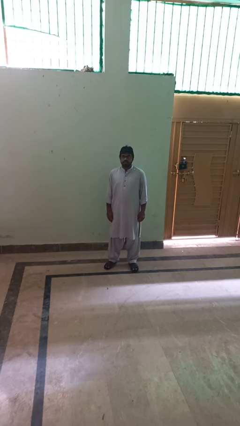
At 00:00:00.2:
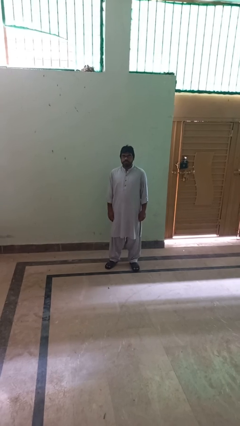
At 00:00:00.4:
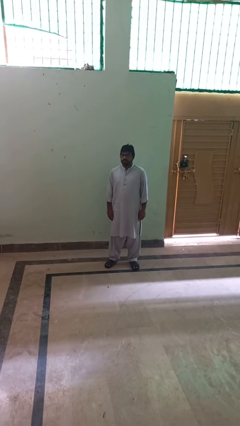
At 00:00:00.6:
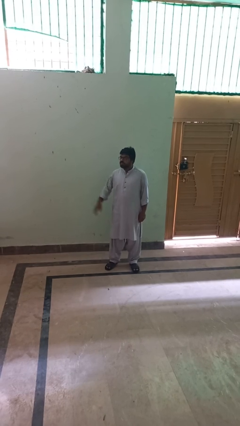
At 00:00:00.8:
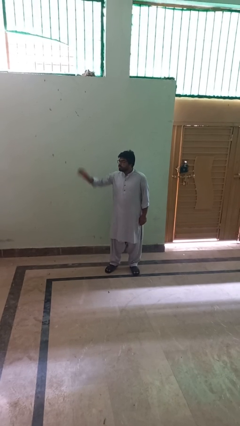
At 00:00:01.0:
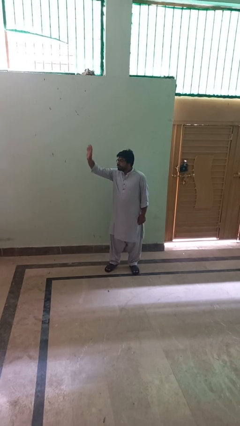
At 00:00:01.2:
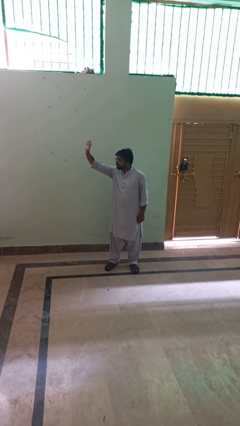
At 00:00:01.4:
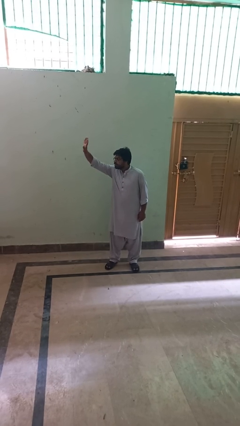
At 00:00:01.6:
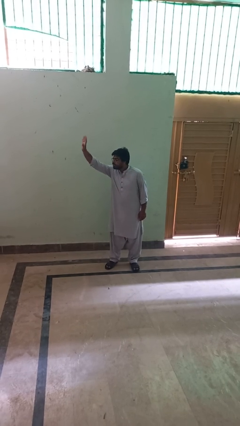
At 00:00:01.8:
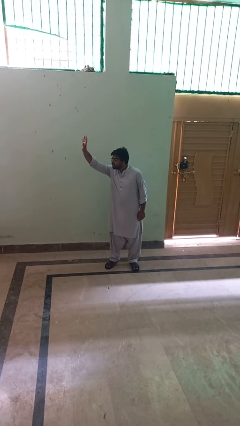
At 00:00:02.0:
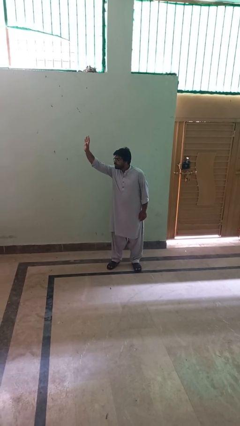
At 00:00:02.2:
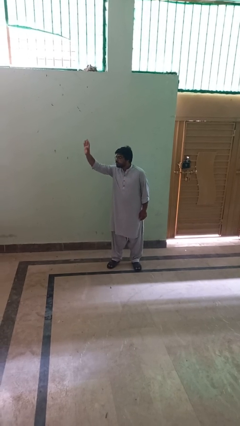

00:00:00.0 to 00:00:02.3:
person waves at person

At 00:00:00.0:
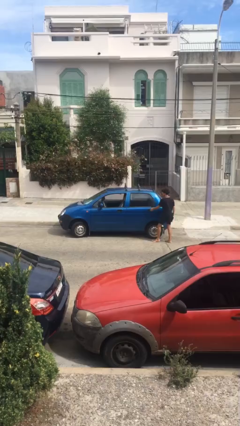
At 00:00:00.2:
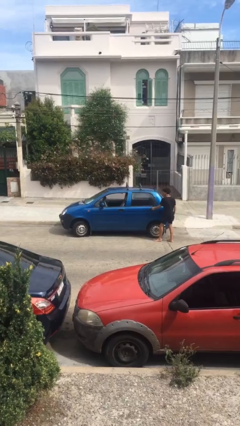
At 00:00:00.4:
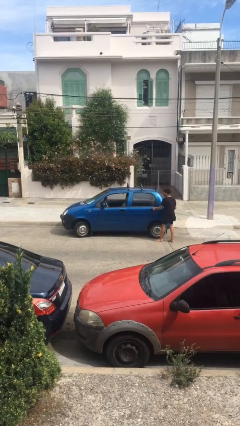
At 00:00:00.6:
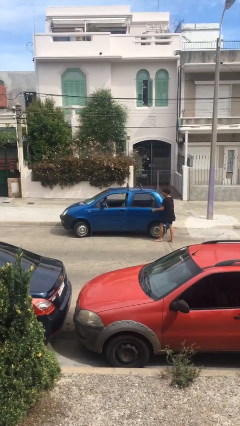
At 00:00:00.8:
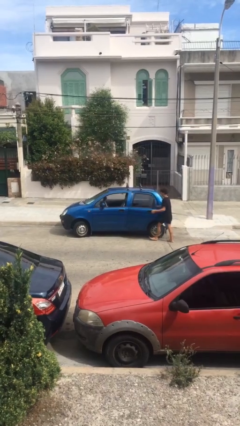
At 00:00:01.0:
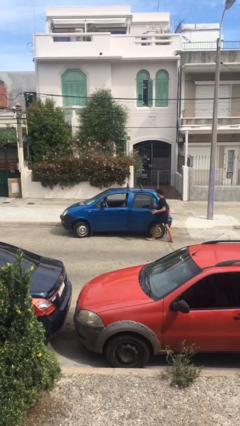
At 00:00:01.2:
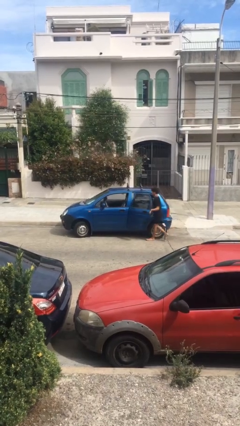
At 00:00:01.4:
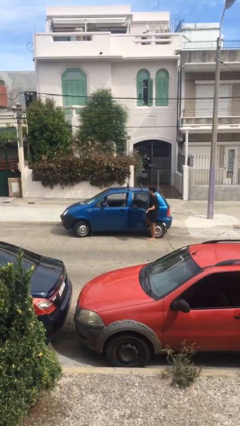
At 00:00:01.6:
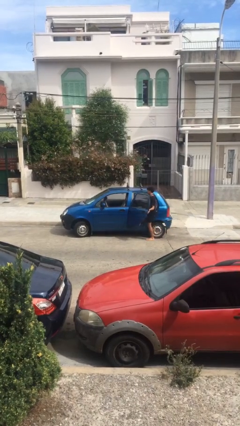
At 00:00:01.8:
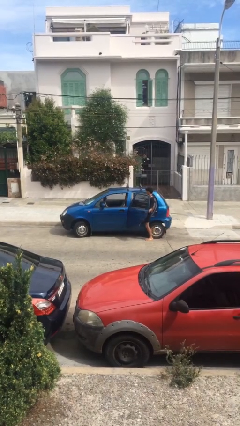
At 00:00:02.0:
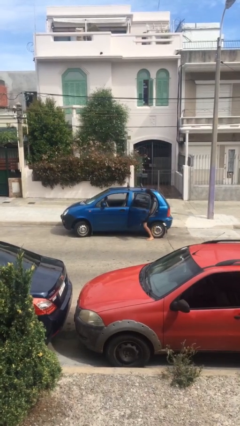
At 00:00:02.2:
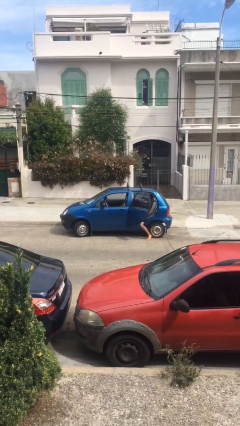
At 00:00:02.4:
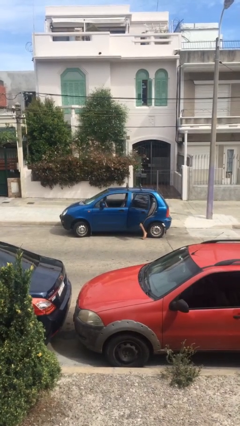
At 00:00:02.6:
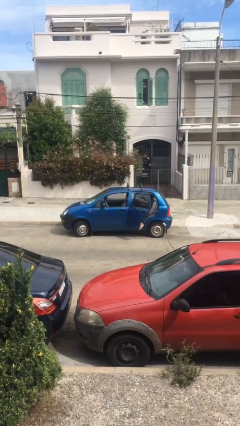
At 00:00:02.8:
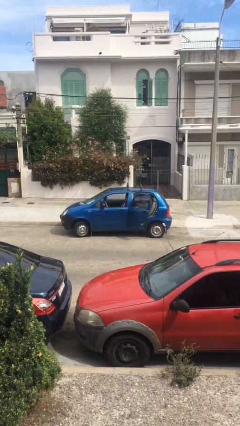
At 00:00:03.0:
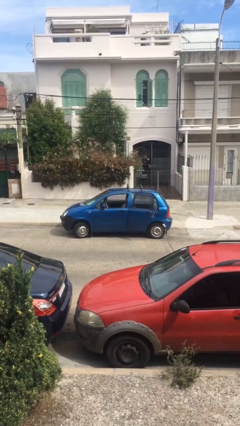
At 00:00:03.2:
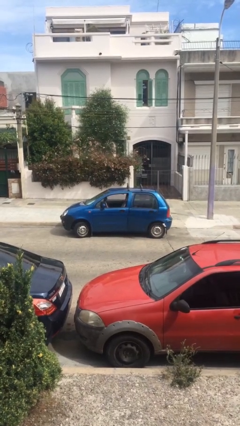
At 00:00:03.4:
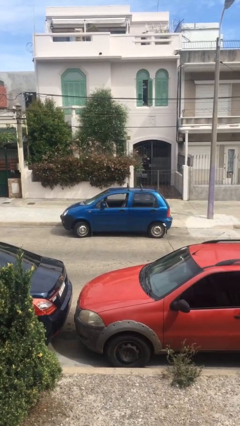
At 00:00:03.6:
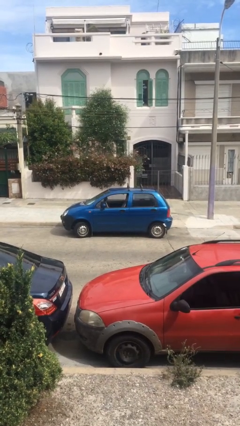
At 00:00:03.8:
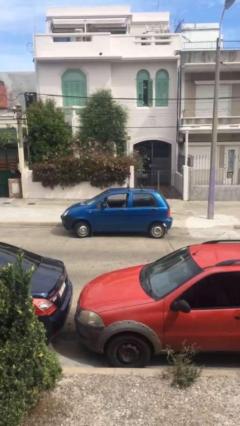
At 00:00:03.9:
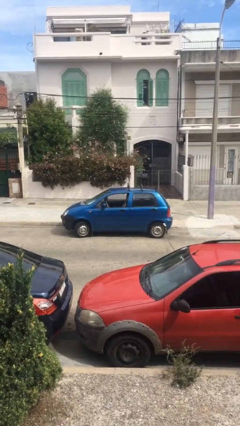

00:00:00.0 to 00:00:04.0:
car picks up person

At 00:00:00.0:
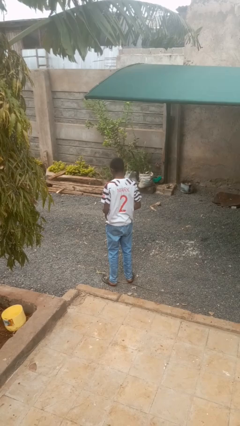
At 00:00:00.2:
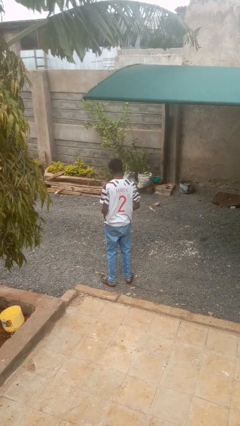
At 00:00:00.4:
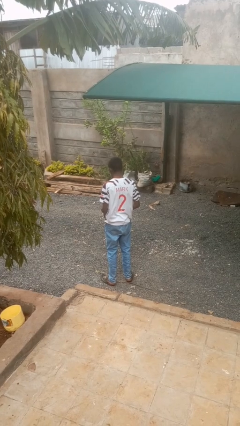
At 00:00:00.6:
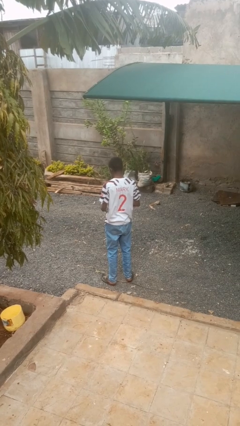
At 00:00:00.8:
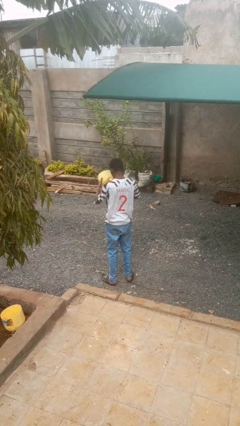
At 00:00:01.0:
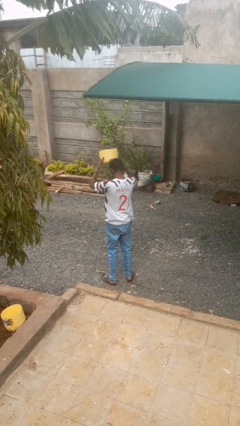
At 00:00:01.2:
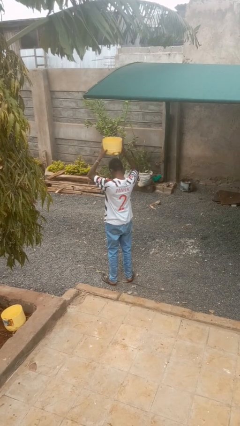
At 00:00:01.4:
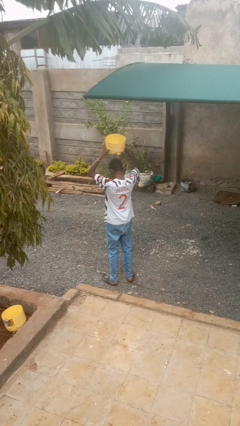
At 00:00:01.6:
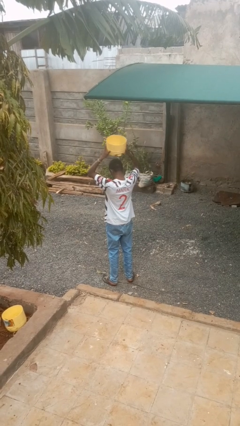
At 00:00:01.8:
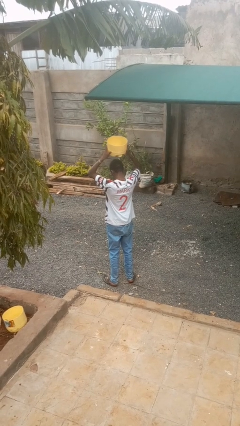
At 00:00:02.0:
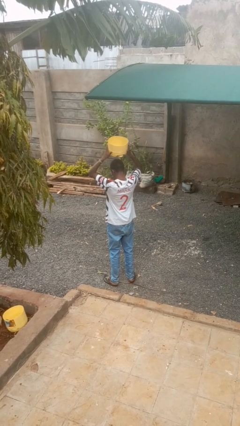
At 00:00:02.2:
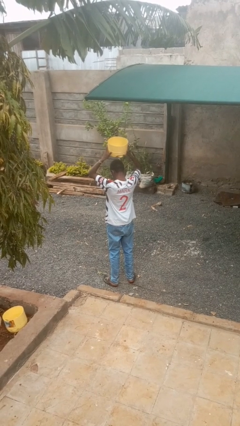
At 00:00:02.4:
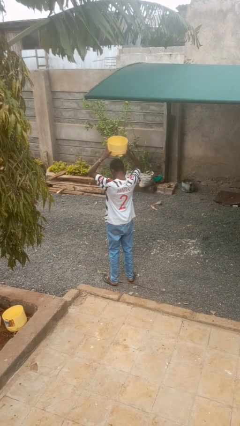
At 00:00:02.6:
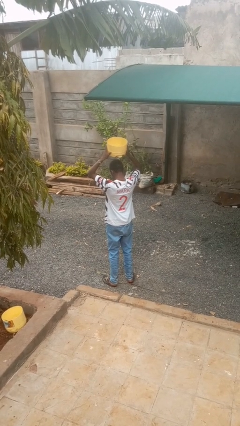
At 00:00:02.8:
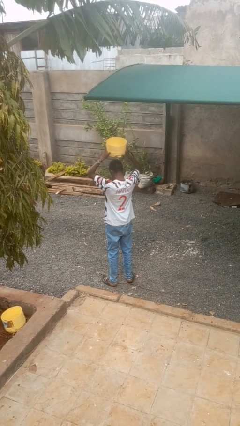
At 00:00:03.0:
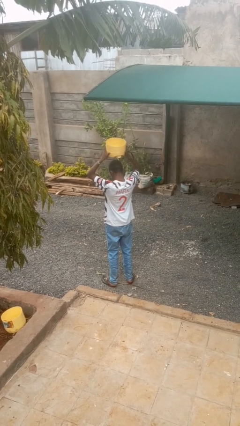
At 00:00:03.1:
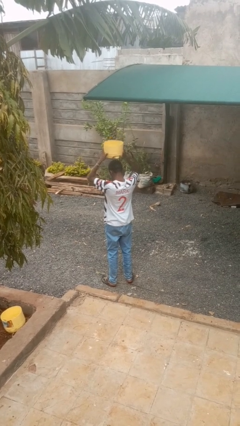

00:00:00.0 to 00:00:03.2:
person holds object above head

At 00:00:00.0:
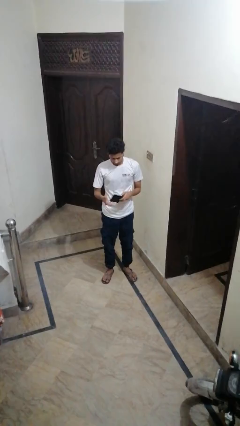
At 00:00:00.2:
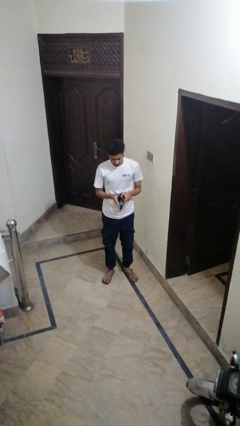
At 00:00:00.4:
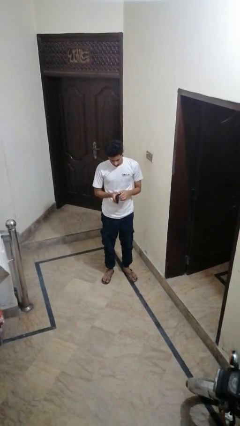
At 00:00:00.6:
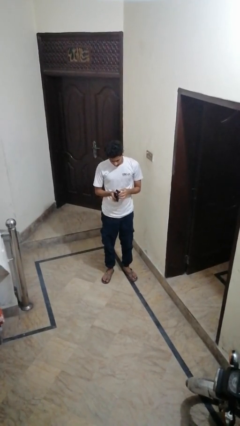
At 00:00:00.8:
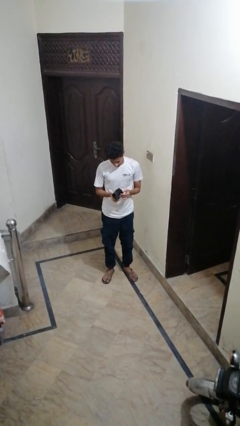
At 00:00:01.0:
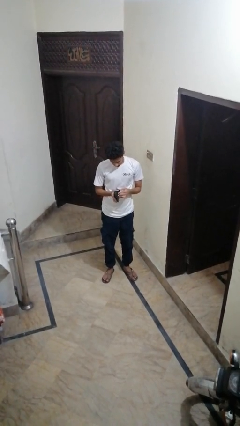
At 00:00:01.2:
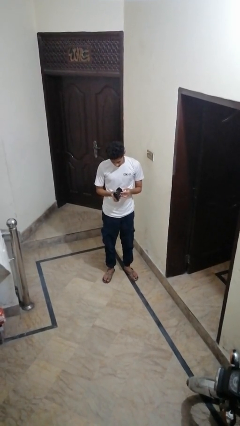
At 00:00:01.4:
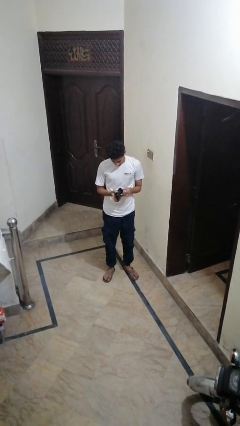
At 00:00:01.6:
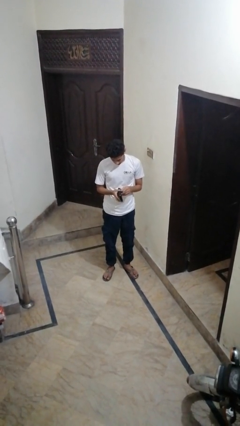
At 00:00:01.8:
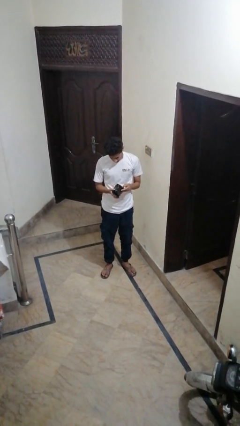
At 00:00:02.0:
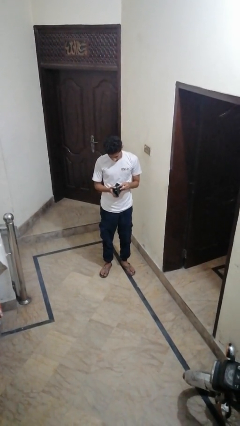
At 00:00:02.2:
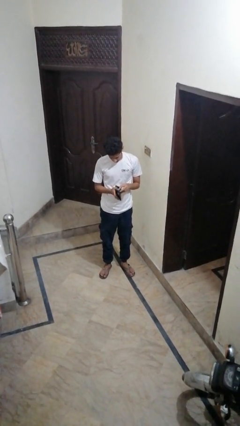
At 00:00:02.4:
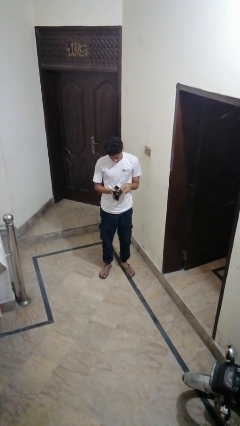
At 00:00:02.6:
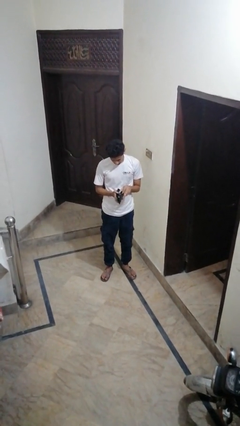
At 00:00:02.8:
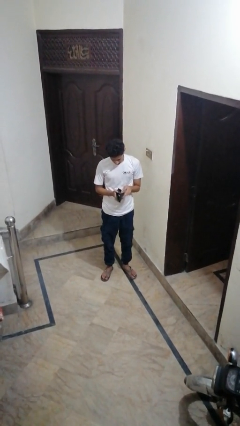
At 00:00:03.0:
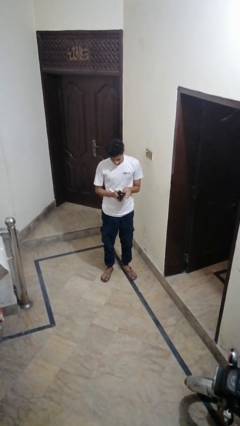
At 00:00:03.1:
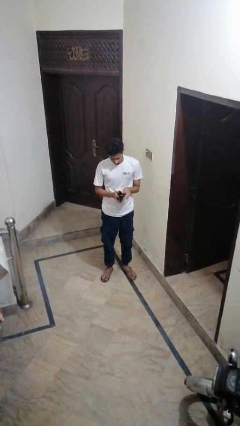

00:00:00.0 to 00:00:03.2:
person searches in purse

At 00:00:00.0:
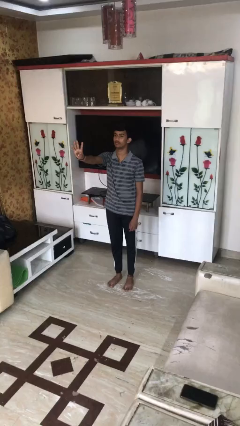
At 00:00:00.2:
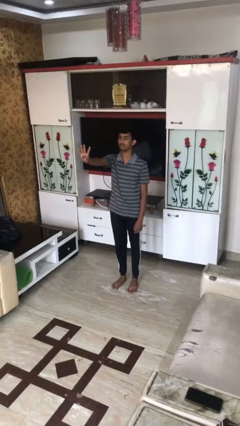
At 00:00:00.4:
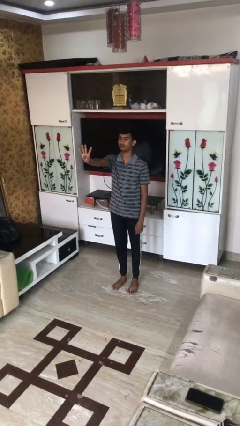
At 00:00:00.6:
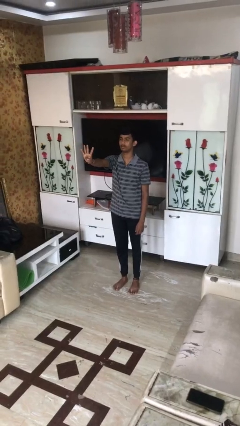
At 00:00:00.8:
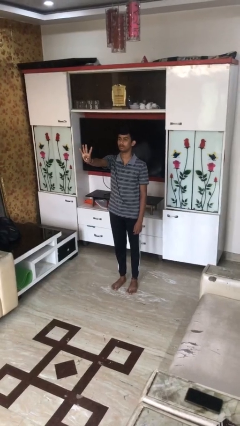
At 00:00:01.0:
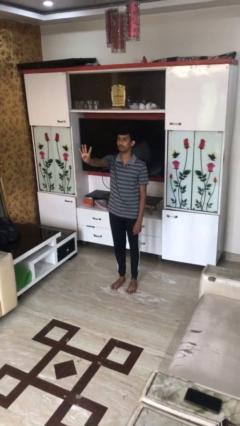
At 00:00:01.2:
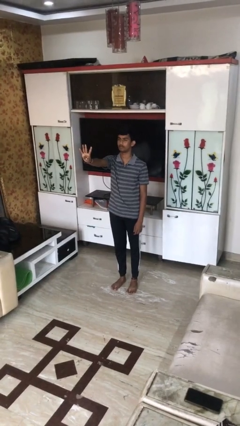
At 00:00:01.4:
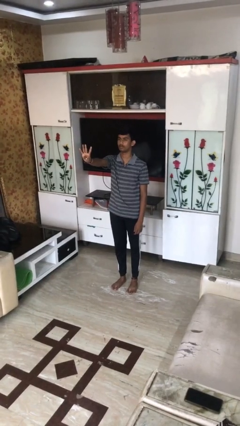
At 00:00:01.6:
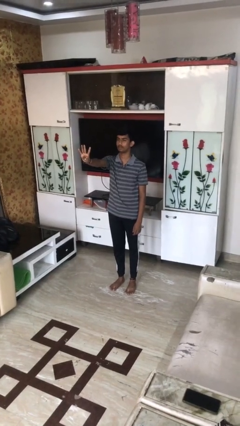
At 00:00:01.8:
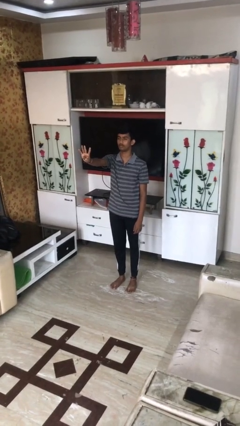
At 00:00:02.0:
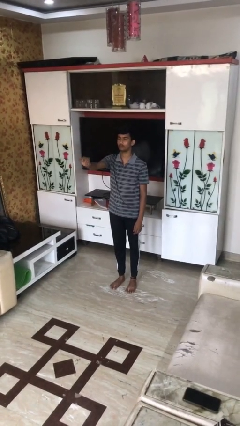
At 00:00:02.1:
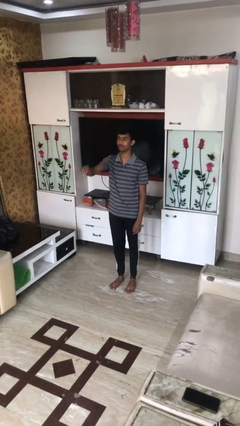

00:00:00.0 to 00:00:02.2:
person gestures number four

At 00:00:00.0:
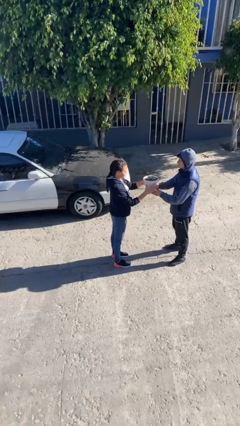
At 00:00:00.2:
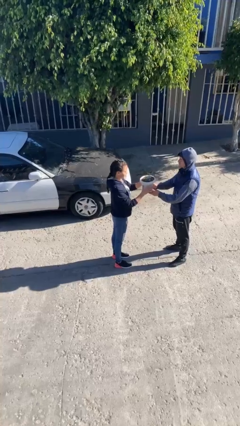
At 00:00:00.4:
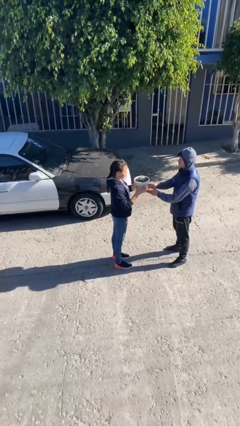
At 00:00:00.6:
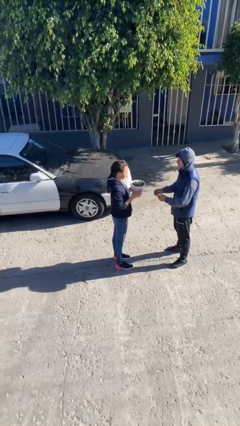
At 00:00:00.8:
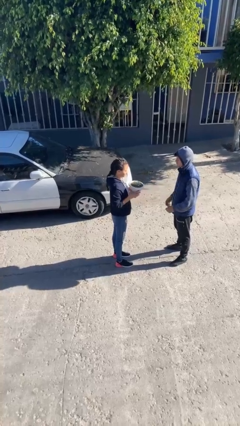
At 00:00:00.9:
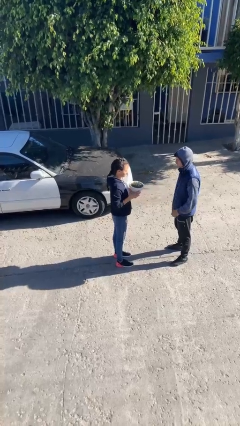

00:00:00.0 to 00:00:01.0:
person transfers object to person

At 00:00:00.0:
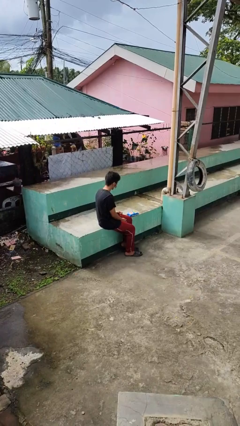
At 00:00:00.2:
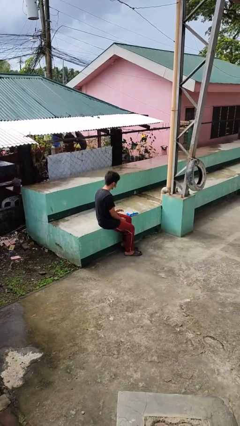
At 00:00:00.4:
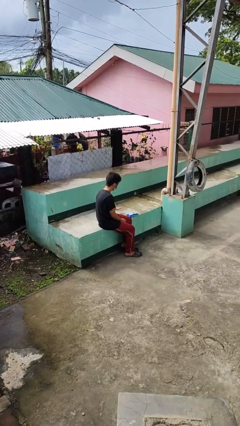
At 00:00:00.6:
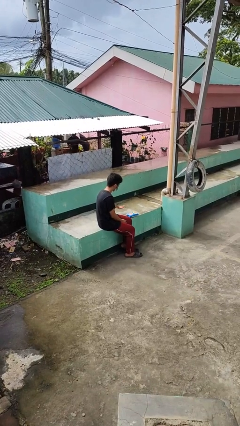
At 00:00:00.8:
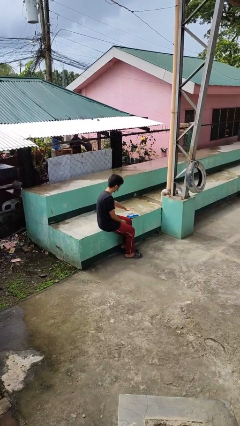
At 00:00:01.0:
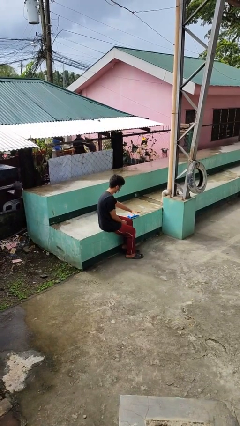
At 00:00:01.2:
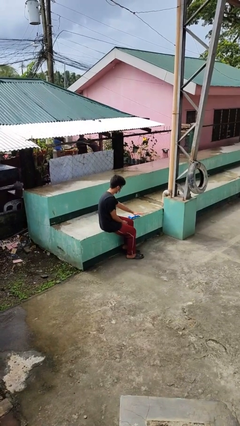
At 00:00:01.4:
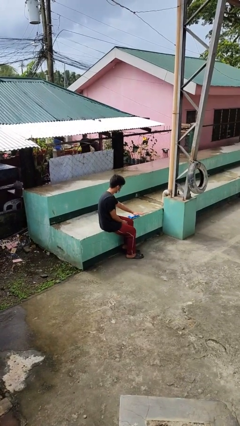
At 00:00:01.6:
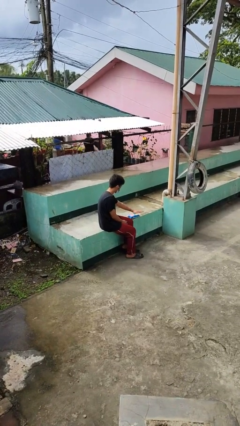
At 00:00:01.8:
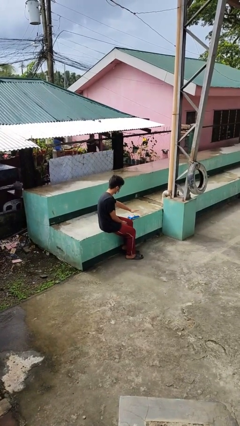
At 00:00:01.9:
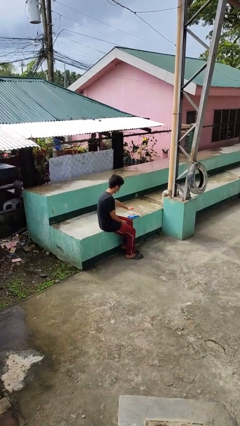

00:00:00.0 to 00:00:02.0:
person waves hand over object
